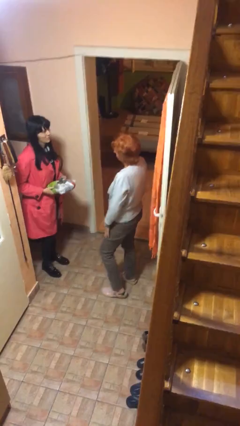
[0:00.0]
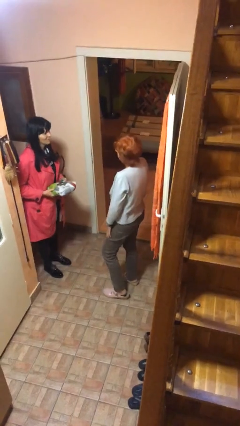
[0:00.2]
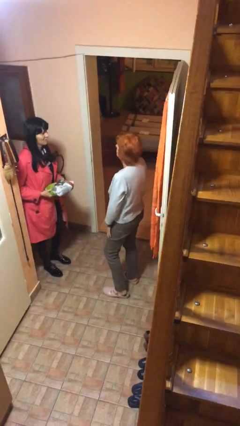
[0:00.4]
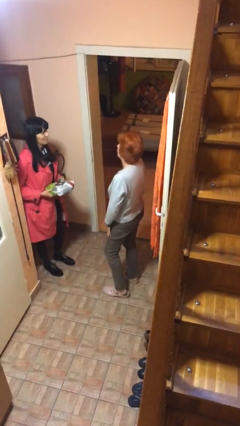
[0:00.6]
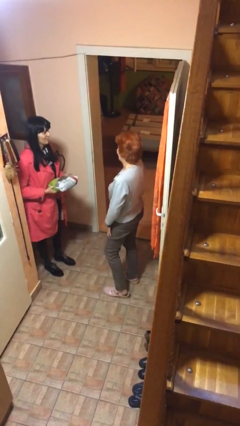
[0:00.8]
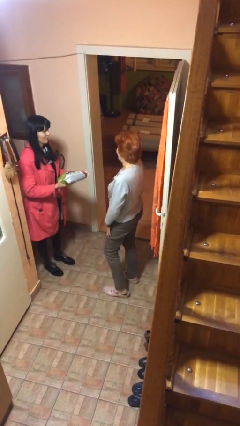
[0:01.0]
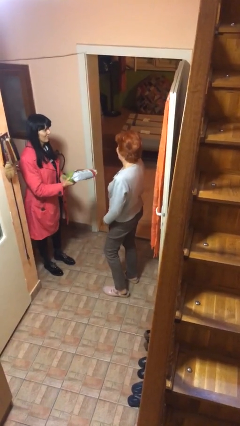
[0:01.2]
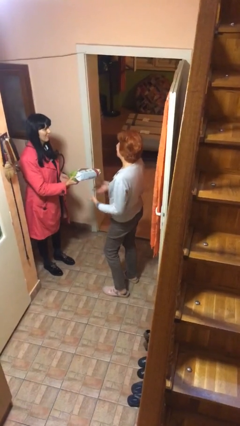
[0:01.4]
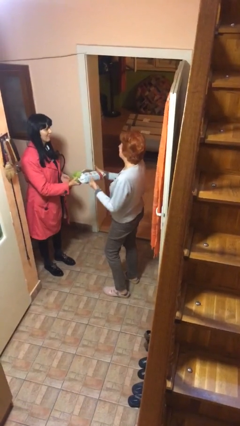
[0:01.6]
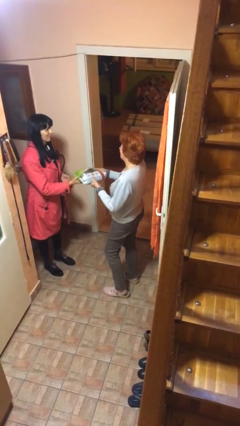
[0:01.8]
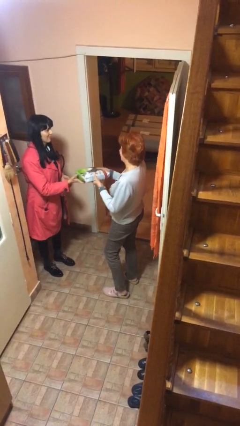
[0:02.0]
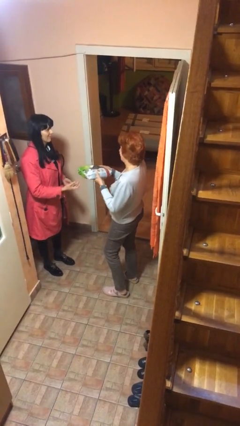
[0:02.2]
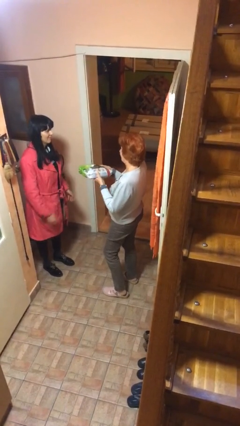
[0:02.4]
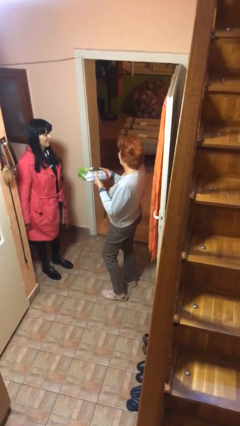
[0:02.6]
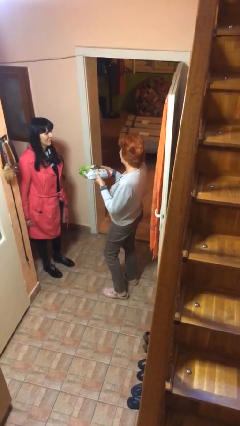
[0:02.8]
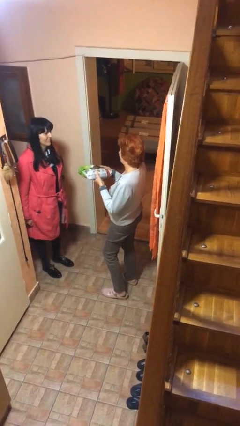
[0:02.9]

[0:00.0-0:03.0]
person transfers object to person

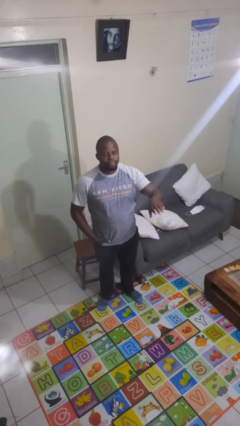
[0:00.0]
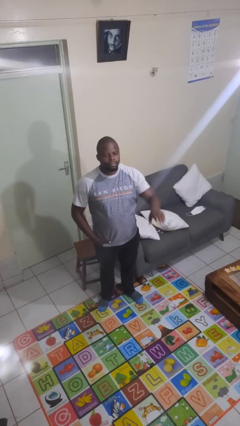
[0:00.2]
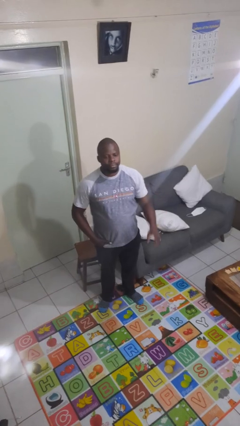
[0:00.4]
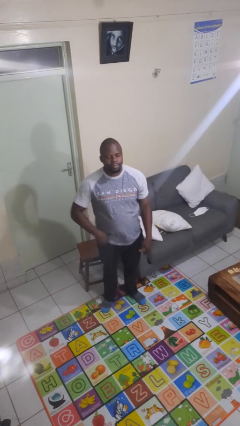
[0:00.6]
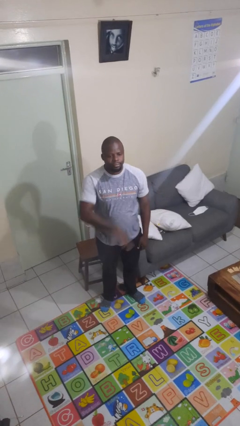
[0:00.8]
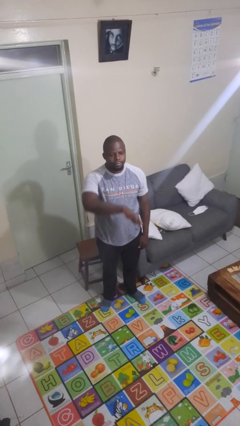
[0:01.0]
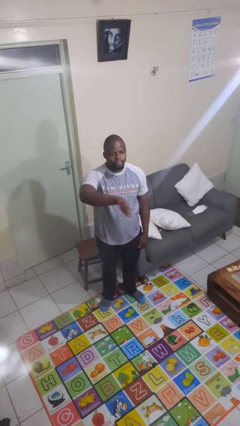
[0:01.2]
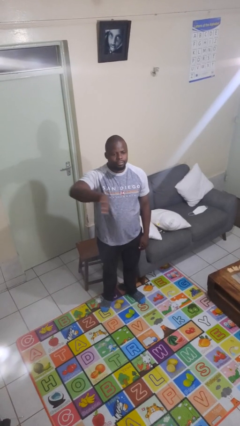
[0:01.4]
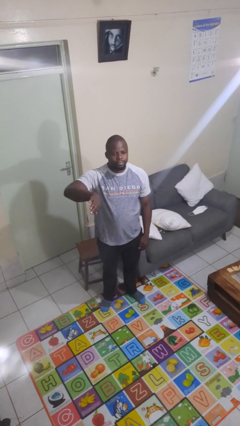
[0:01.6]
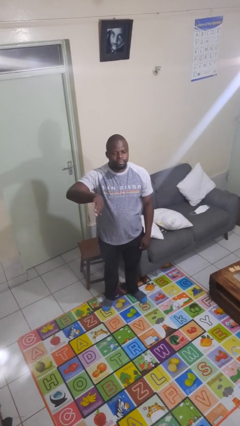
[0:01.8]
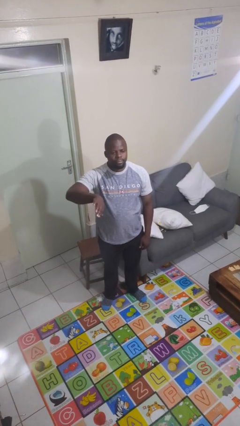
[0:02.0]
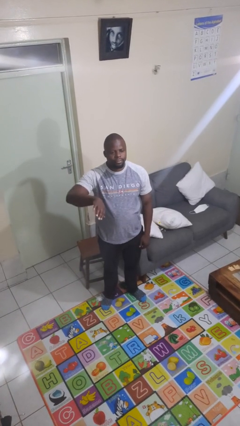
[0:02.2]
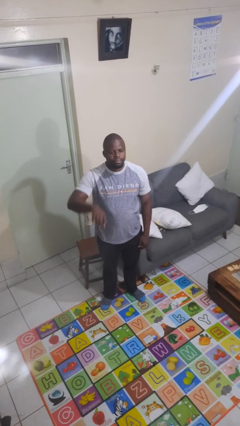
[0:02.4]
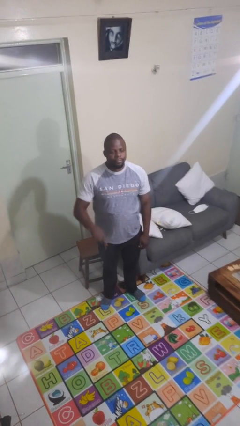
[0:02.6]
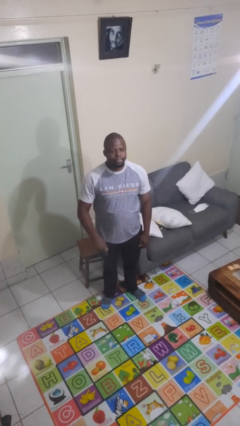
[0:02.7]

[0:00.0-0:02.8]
person gestures swipe right

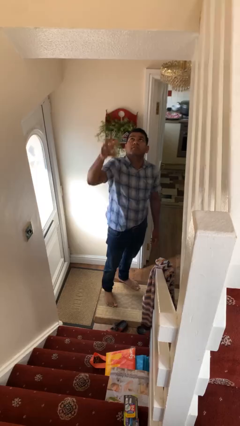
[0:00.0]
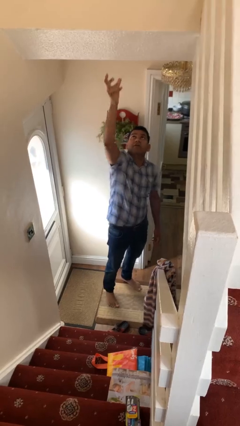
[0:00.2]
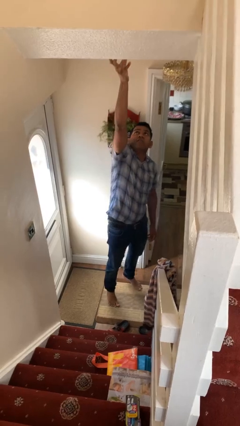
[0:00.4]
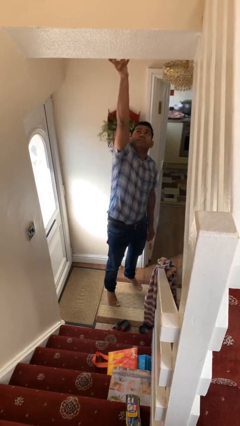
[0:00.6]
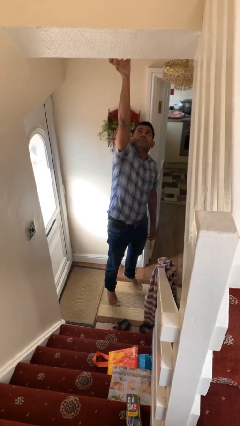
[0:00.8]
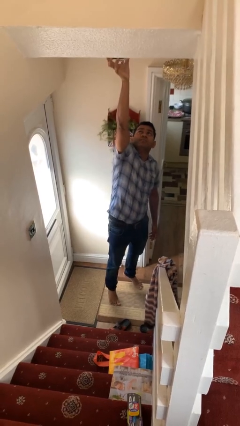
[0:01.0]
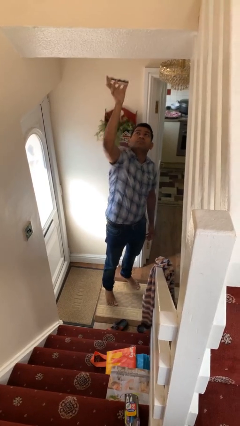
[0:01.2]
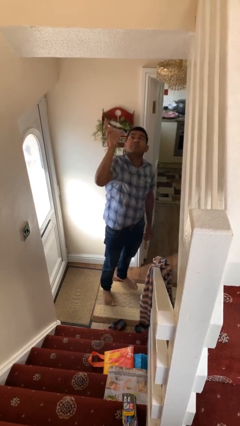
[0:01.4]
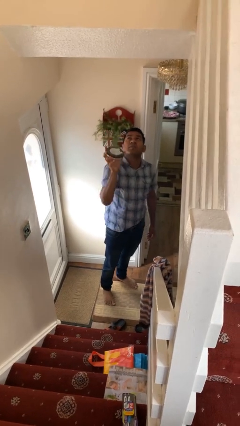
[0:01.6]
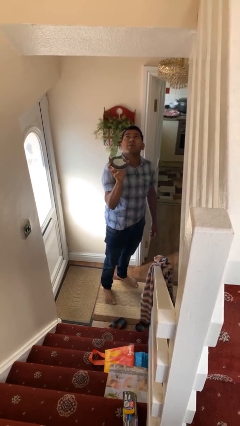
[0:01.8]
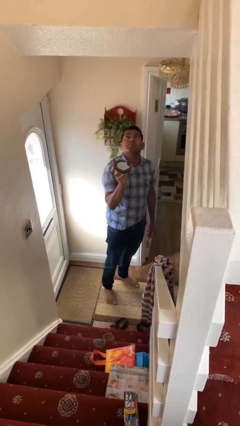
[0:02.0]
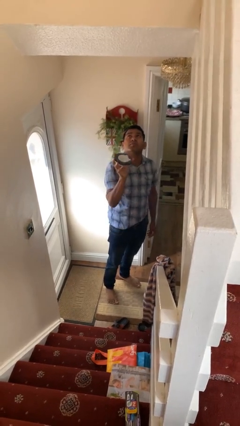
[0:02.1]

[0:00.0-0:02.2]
person takes down smoke detector

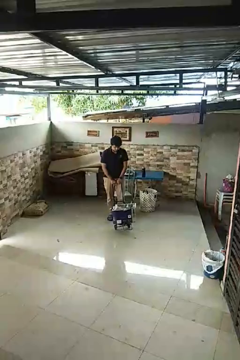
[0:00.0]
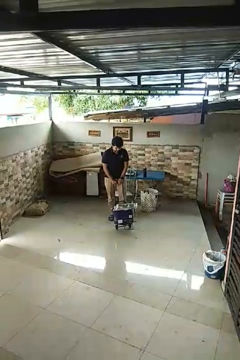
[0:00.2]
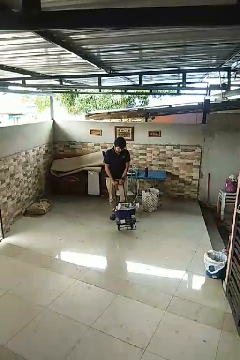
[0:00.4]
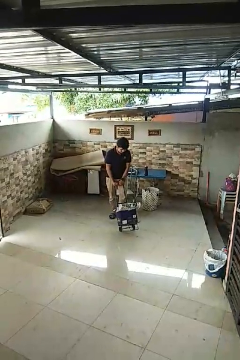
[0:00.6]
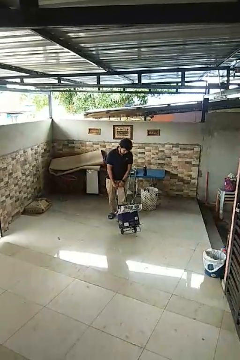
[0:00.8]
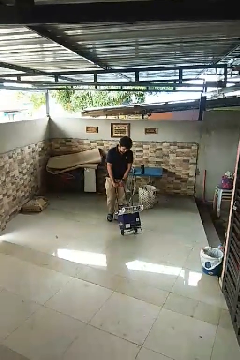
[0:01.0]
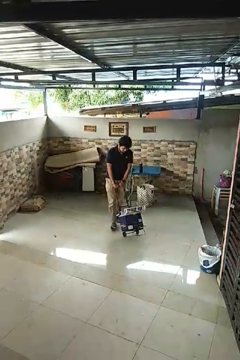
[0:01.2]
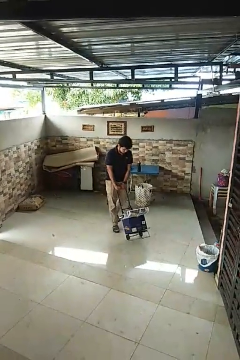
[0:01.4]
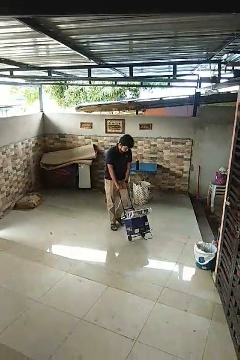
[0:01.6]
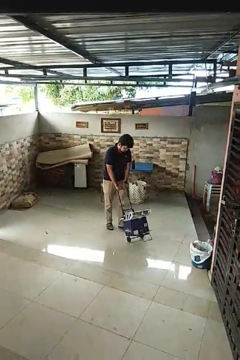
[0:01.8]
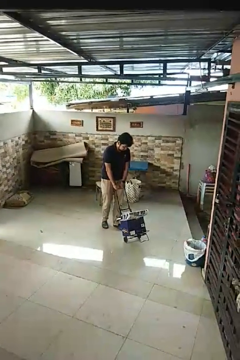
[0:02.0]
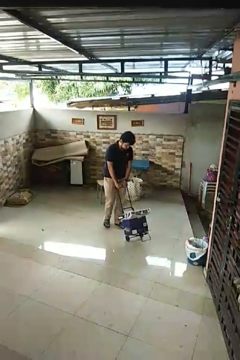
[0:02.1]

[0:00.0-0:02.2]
person pushes wheeled cart

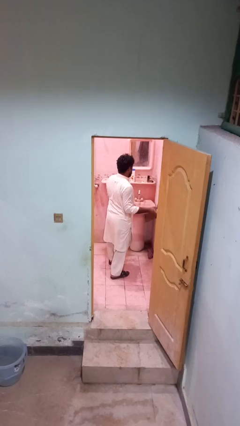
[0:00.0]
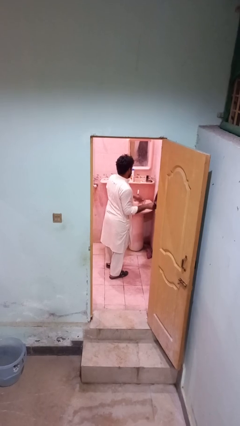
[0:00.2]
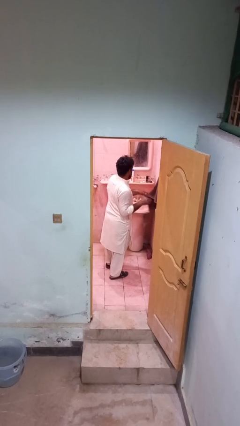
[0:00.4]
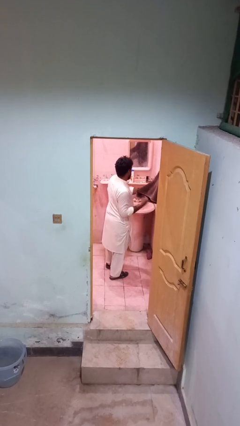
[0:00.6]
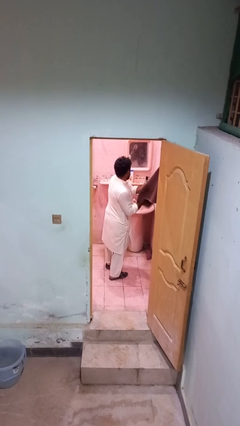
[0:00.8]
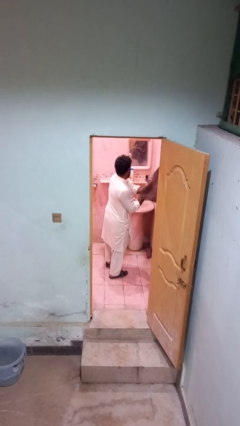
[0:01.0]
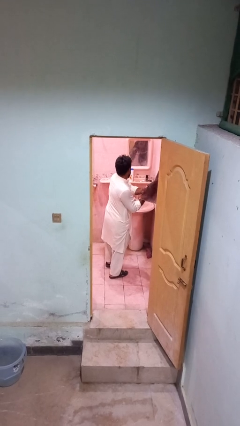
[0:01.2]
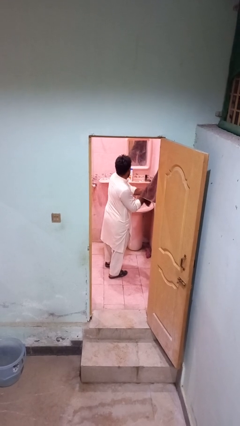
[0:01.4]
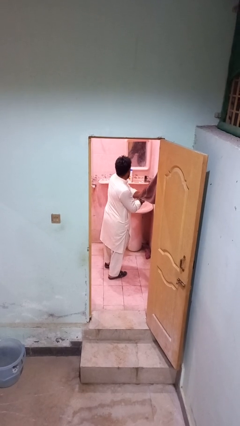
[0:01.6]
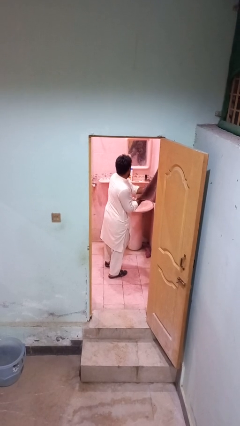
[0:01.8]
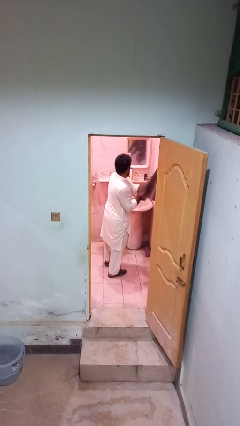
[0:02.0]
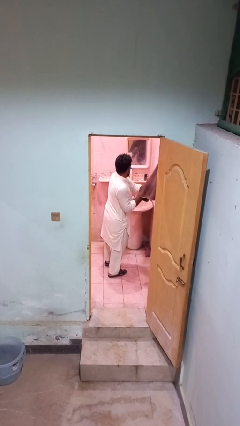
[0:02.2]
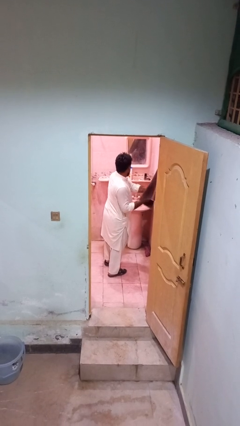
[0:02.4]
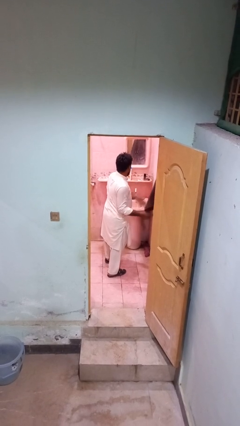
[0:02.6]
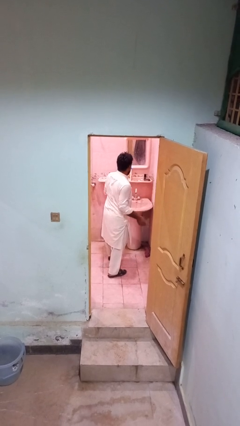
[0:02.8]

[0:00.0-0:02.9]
person dries hands with towel

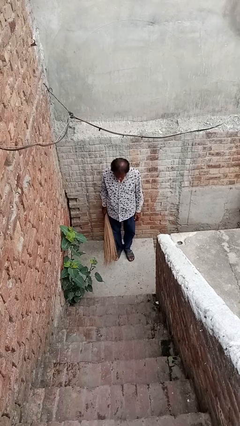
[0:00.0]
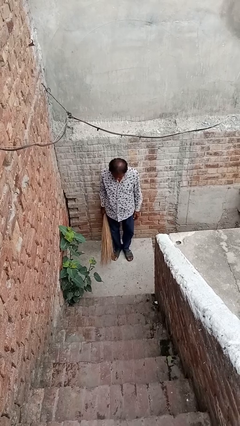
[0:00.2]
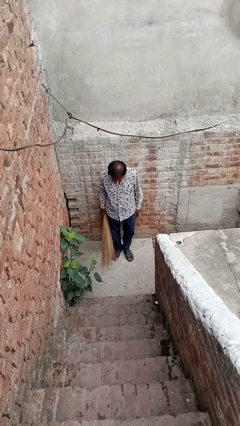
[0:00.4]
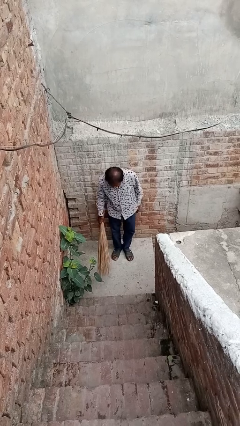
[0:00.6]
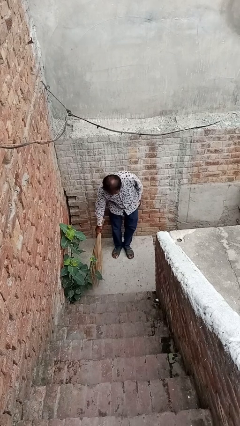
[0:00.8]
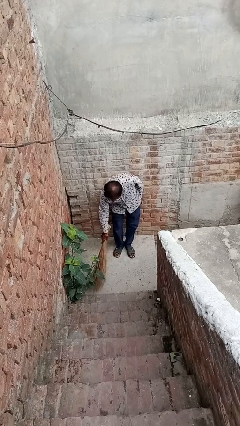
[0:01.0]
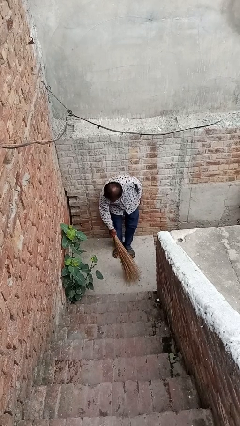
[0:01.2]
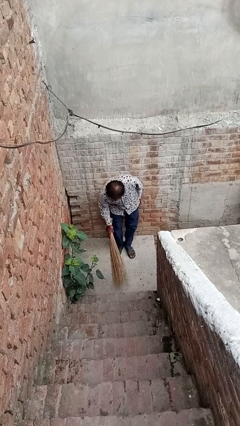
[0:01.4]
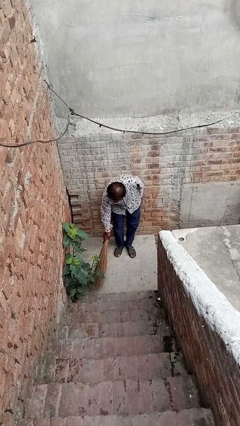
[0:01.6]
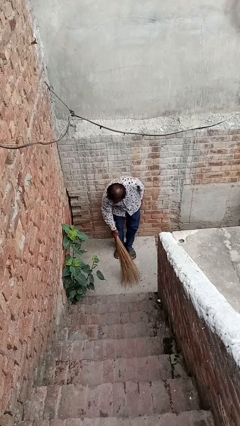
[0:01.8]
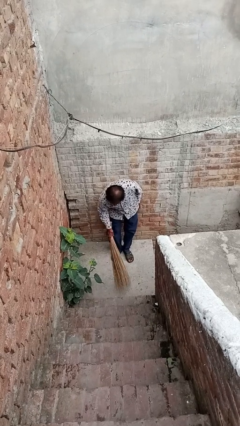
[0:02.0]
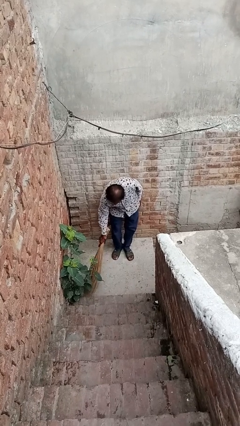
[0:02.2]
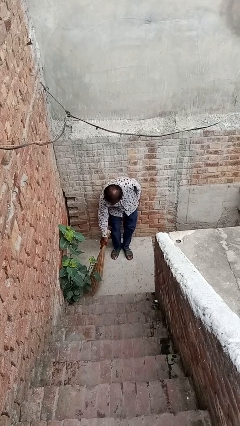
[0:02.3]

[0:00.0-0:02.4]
person sweeps floor

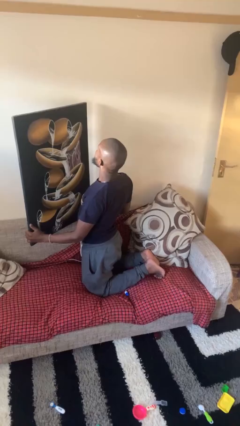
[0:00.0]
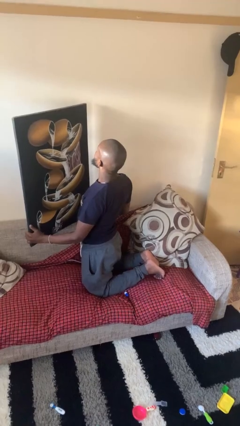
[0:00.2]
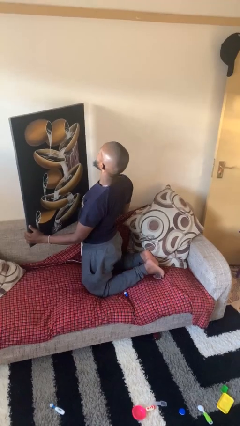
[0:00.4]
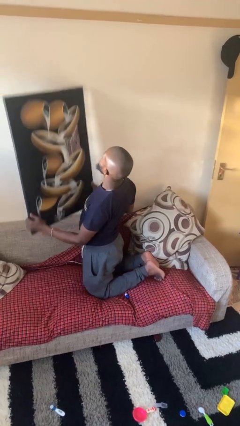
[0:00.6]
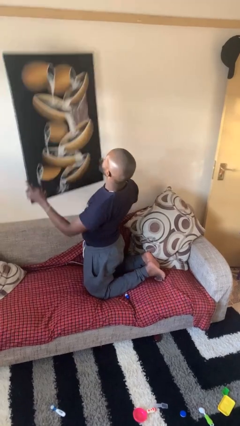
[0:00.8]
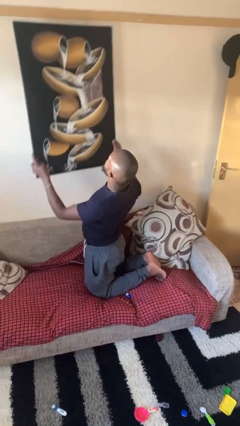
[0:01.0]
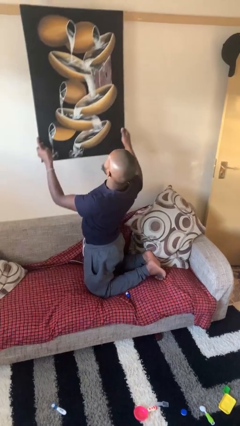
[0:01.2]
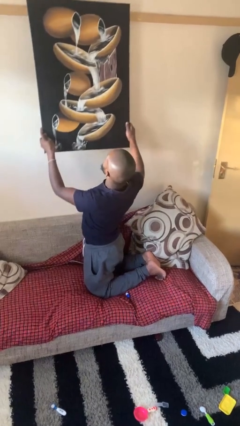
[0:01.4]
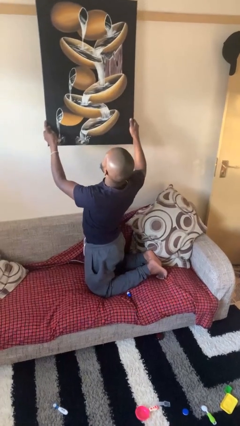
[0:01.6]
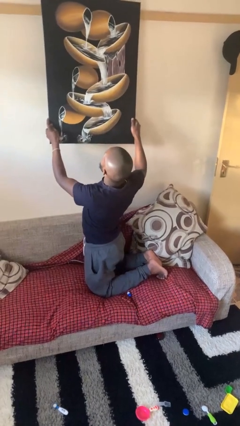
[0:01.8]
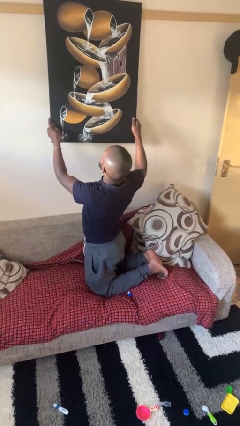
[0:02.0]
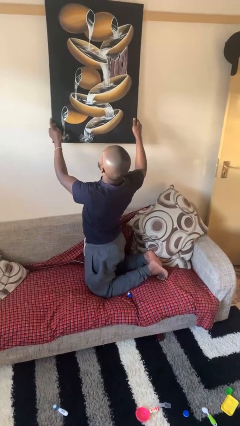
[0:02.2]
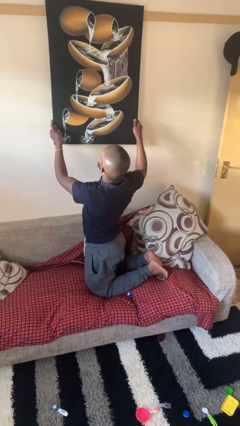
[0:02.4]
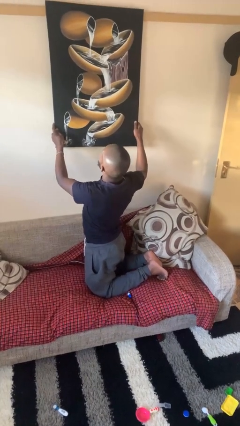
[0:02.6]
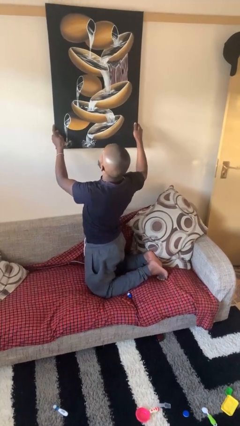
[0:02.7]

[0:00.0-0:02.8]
person puts up picture frame
